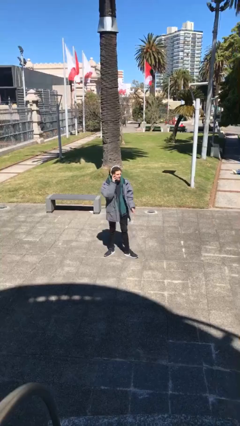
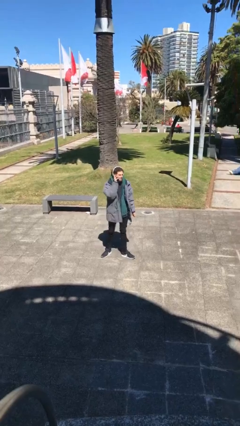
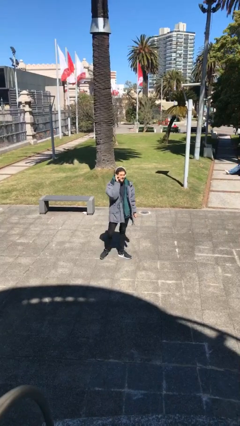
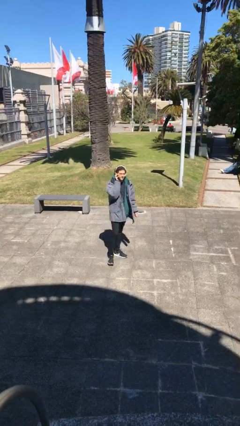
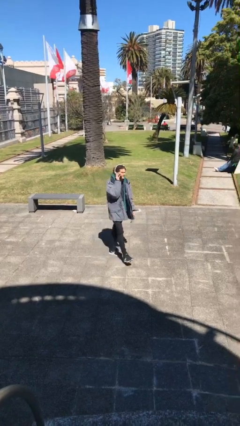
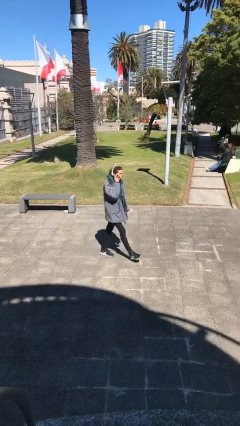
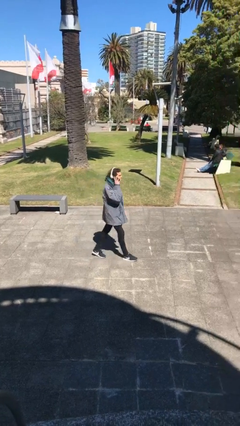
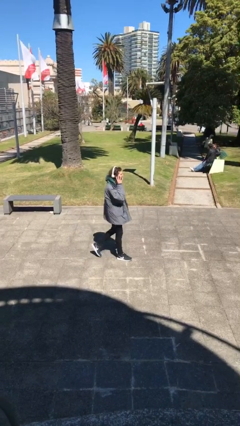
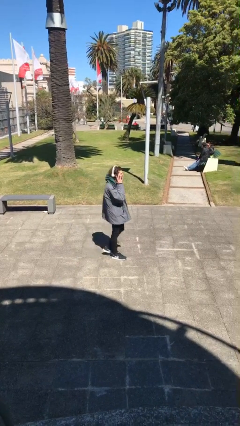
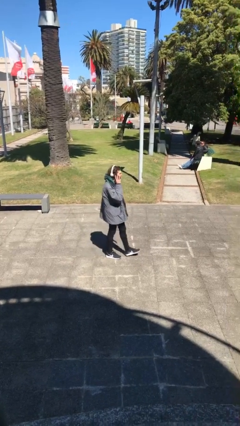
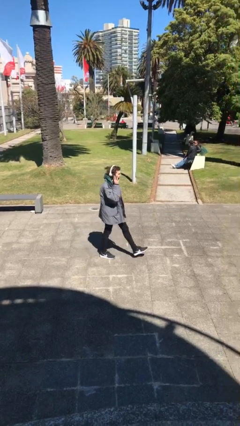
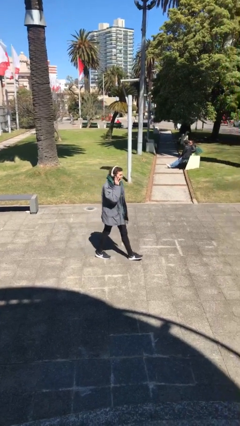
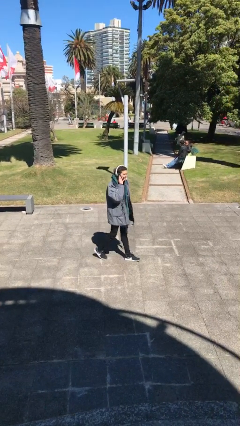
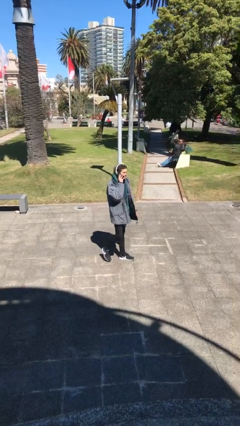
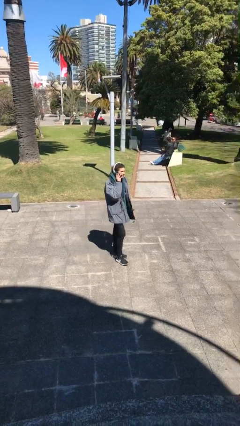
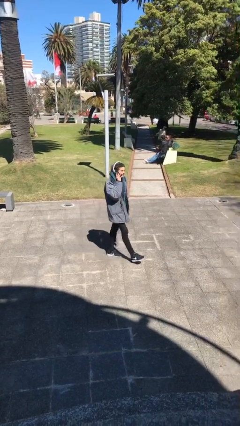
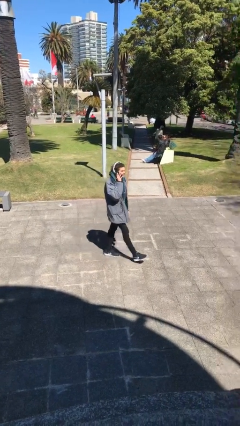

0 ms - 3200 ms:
person talks on phone

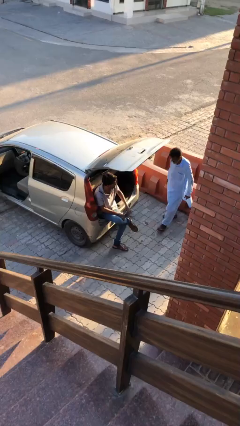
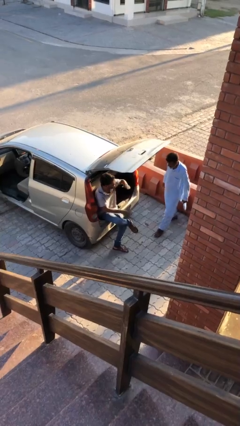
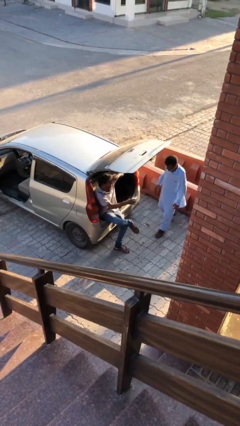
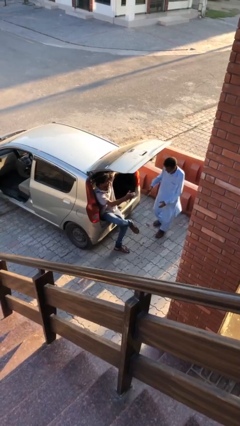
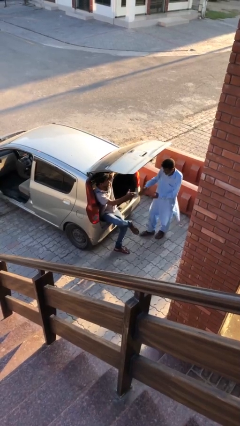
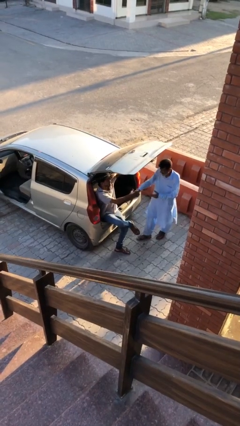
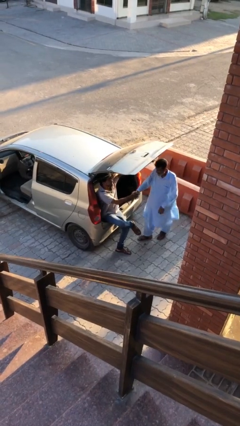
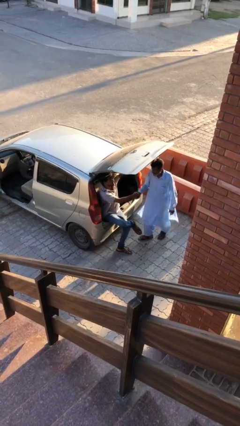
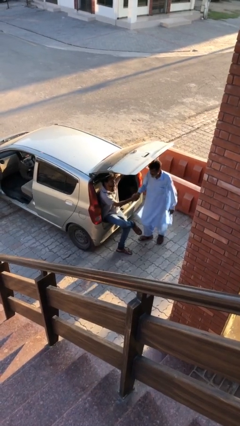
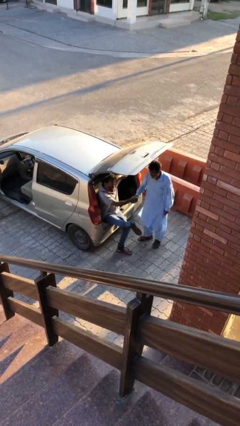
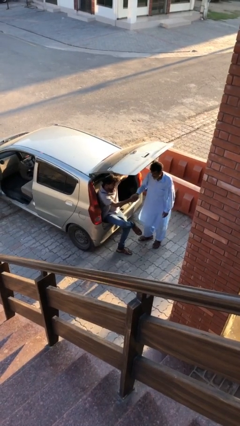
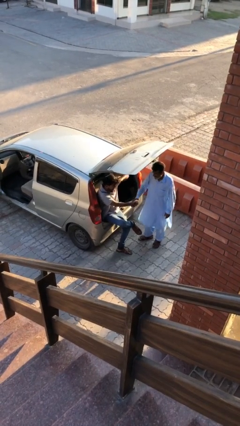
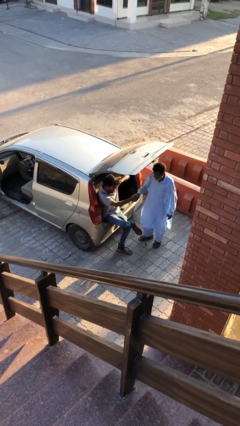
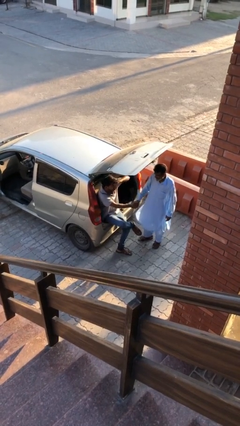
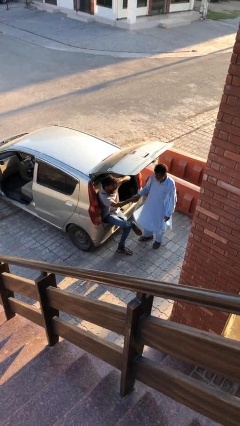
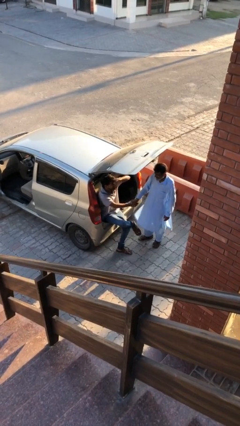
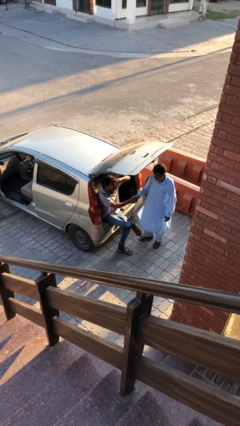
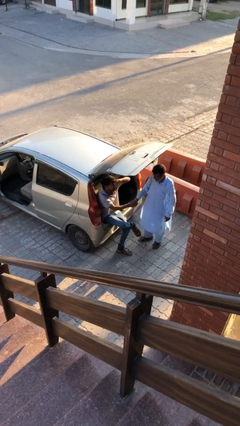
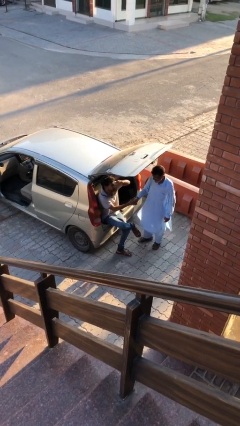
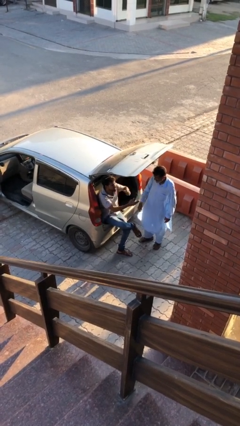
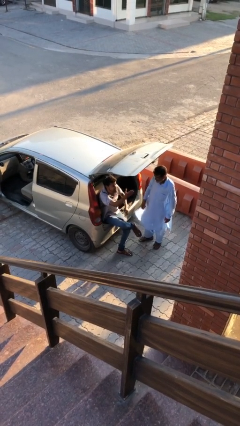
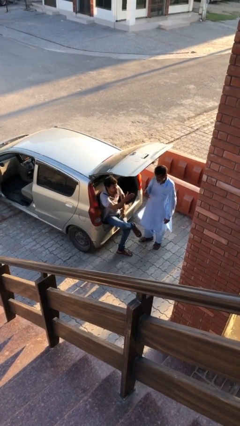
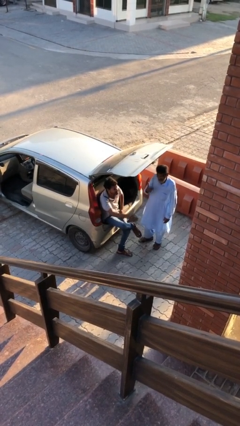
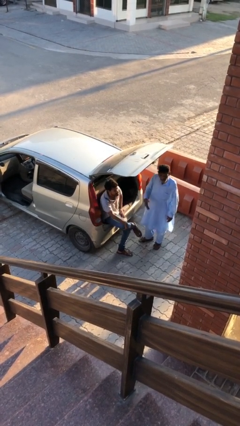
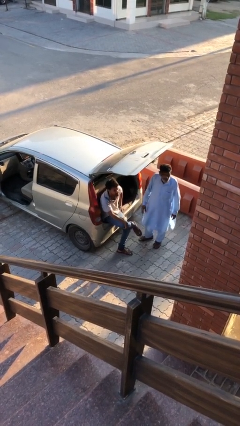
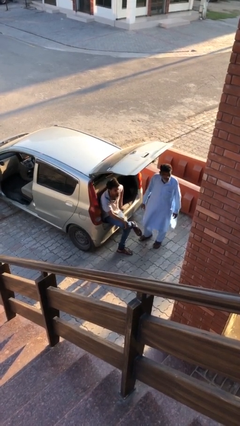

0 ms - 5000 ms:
person shakes hand

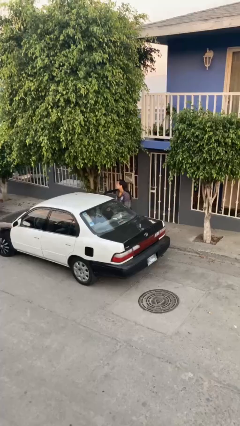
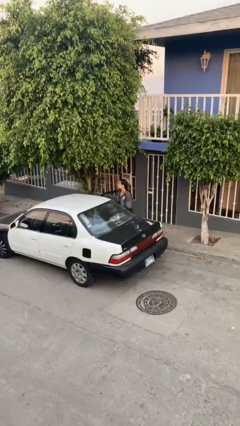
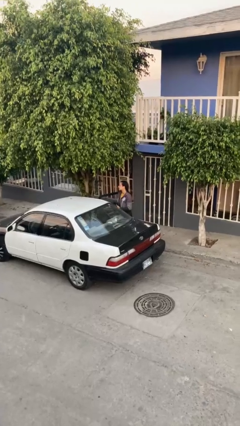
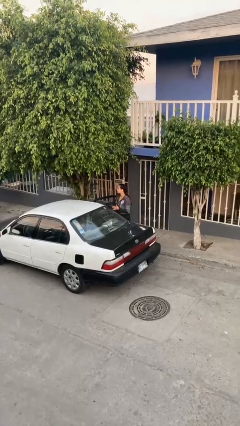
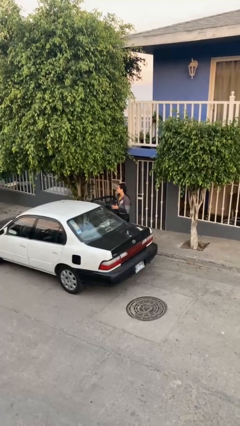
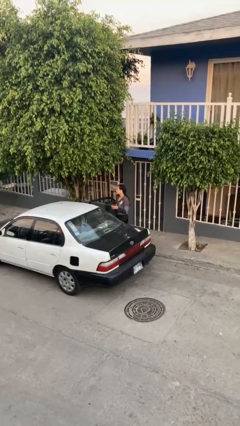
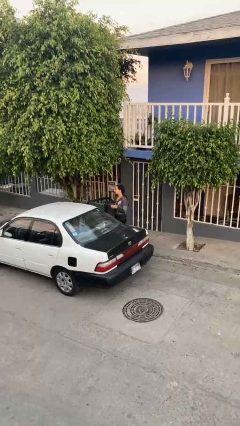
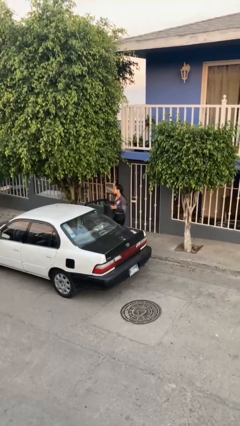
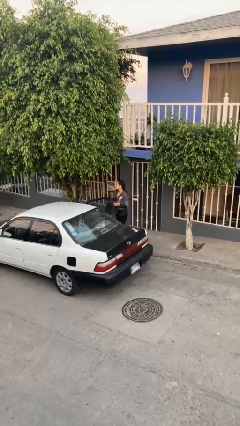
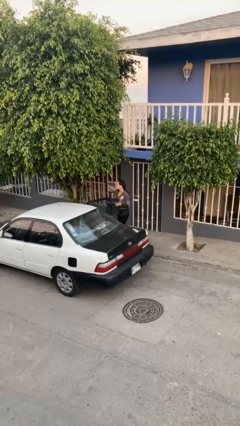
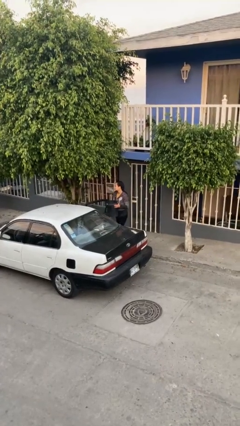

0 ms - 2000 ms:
person unloads car

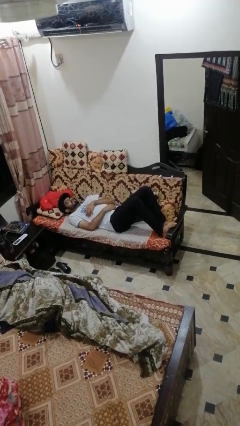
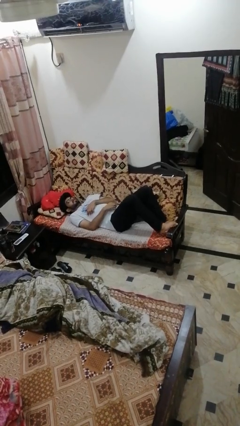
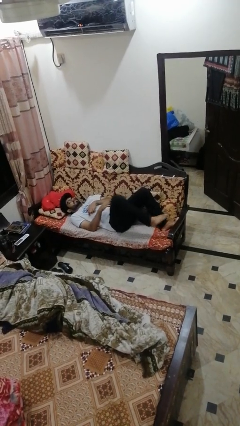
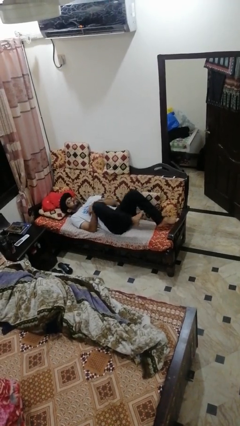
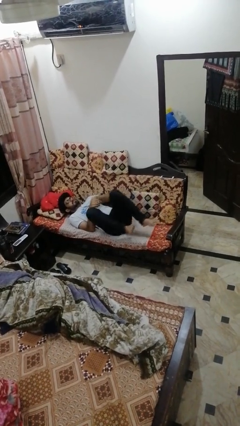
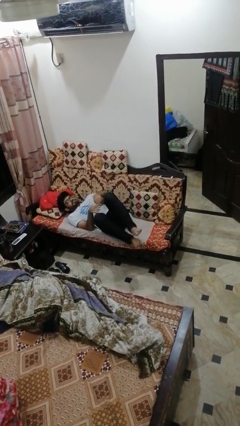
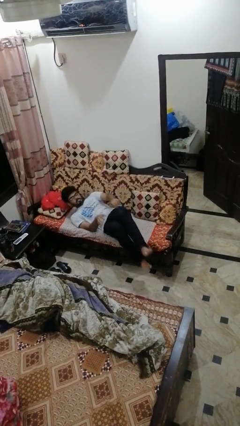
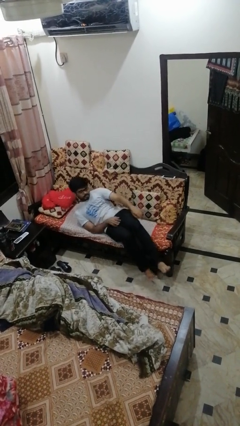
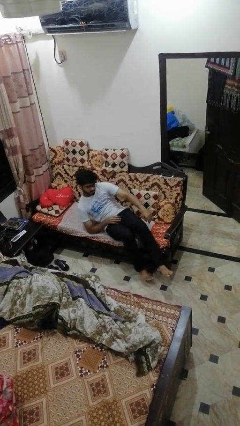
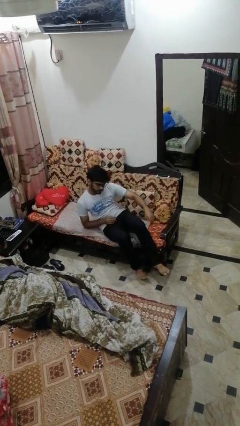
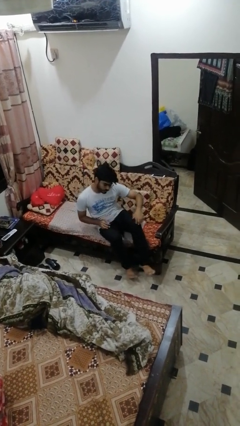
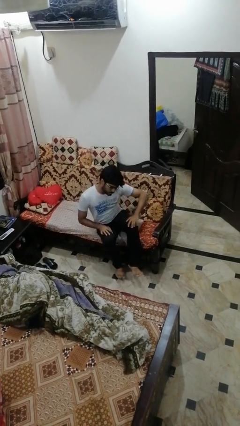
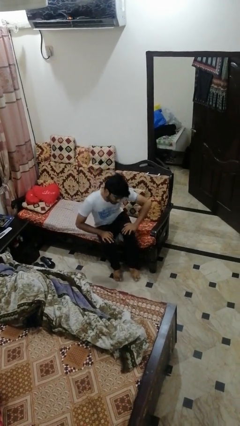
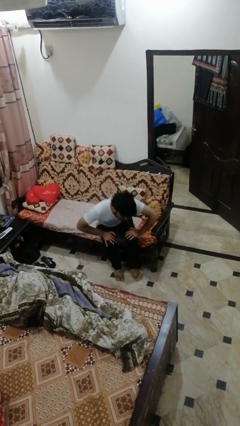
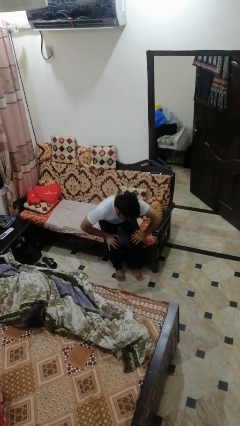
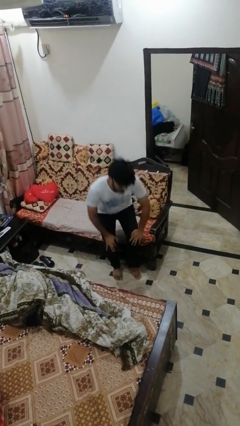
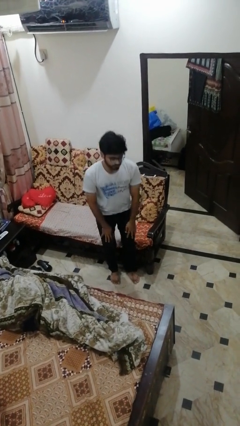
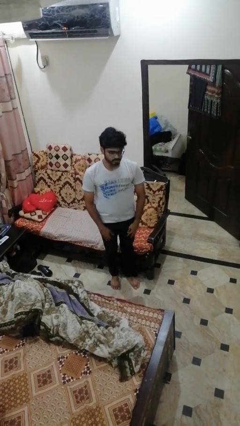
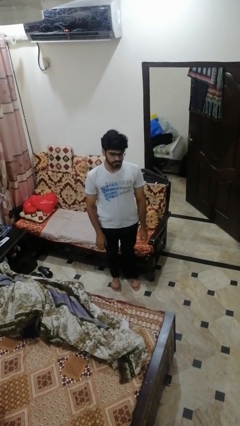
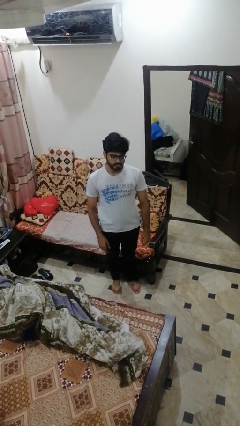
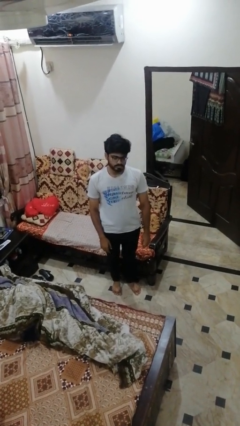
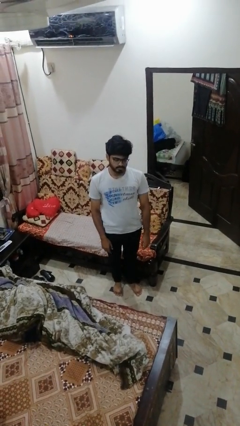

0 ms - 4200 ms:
person stands up

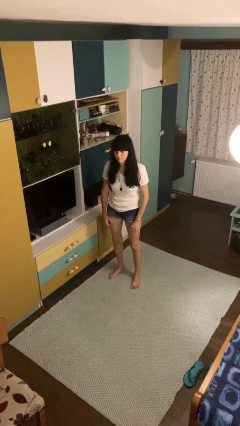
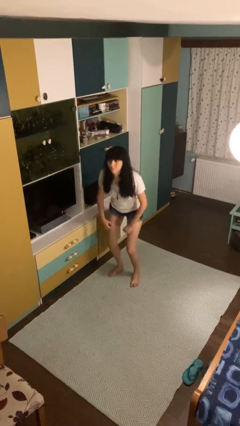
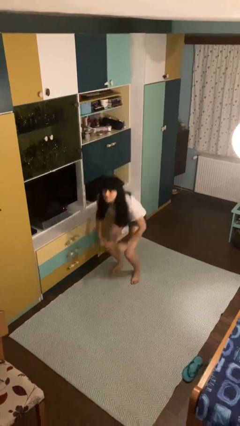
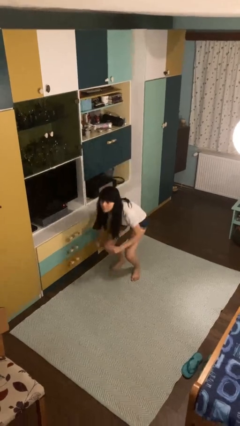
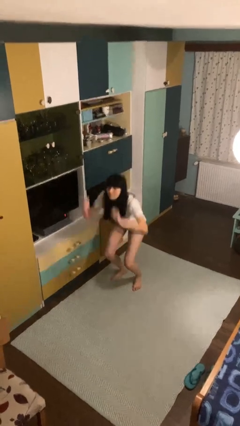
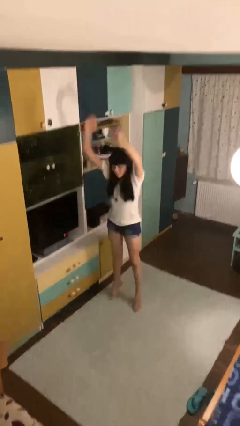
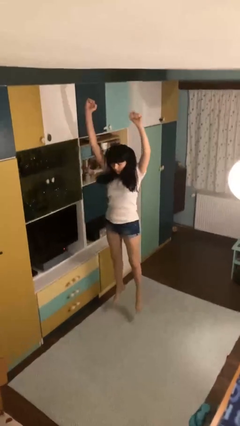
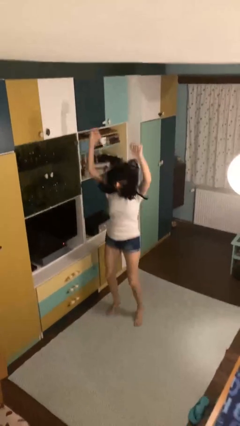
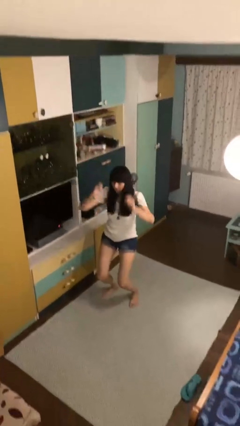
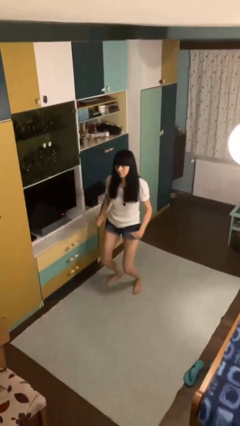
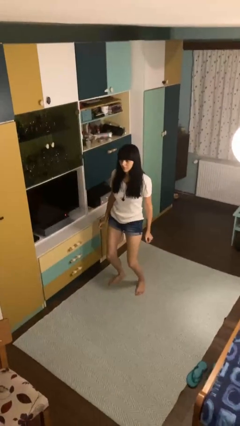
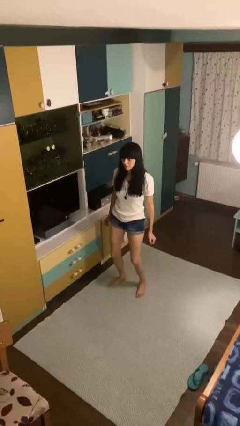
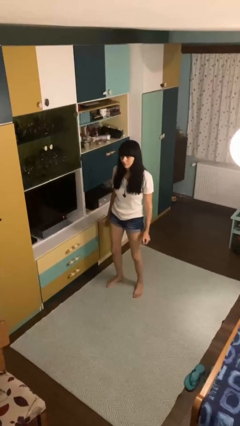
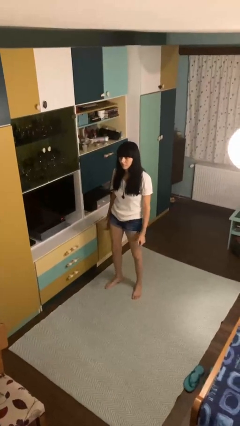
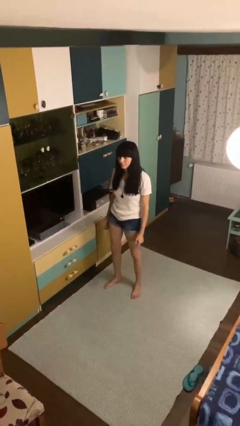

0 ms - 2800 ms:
person jumps

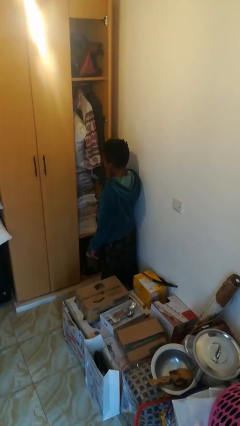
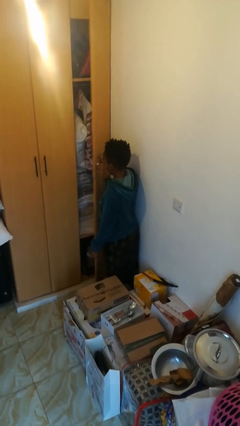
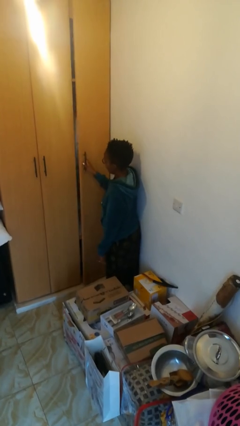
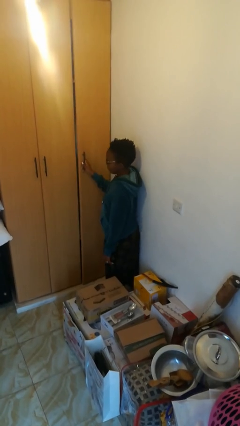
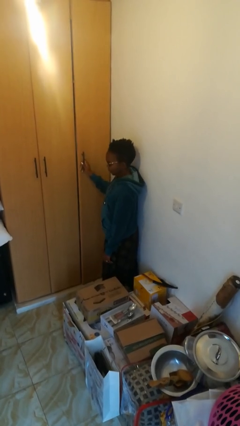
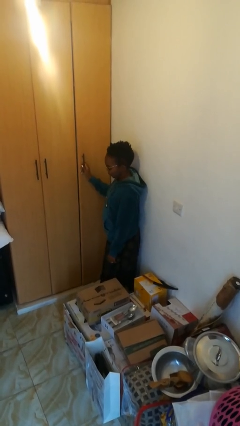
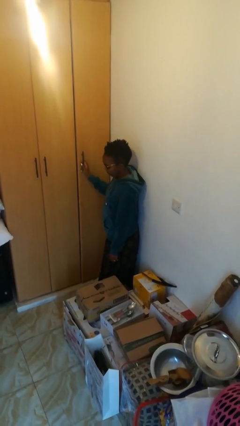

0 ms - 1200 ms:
person closes closet door
